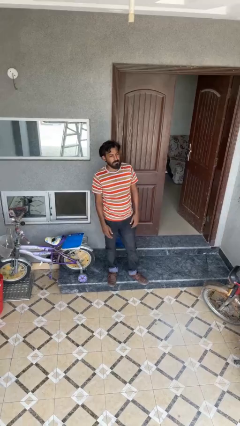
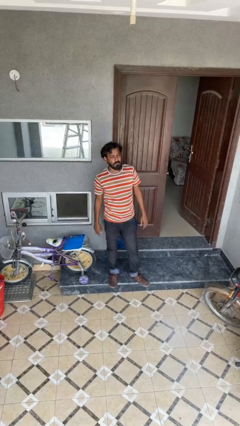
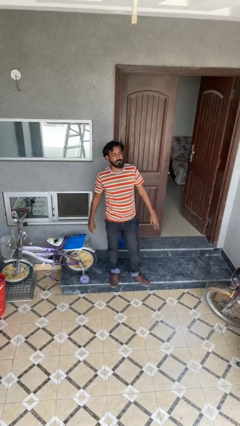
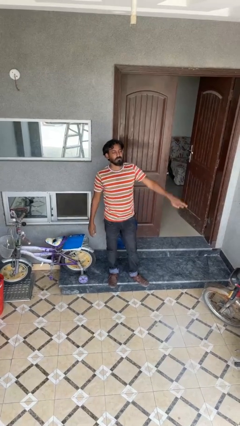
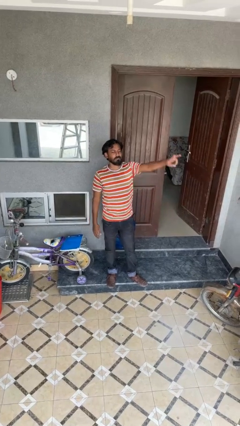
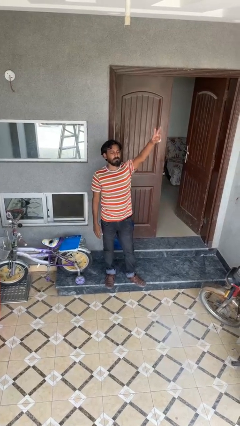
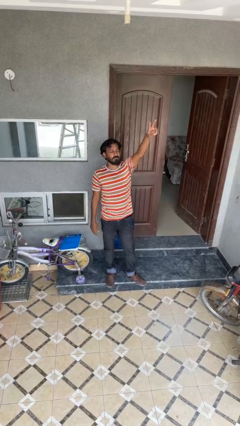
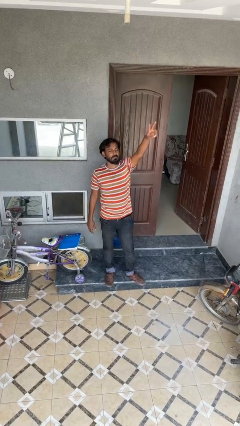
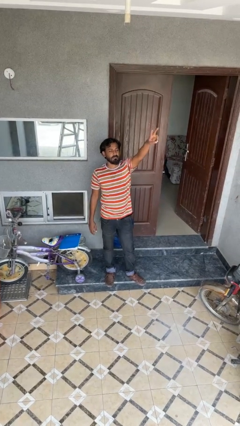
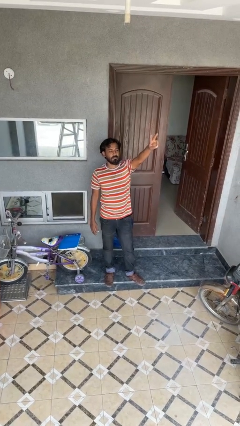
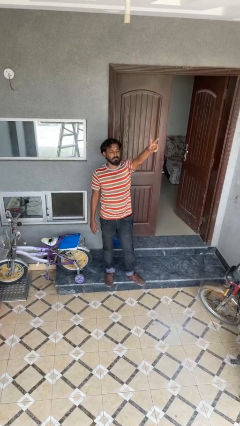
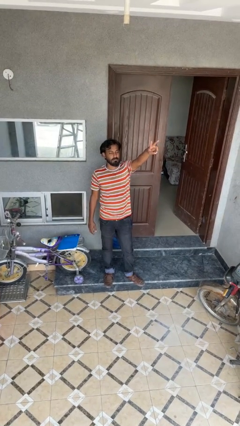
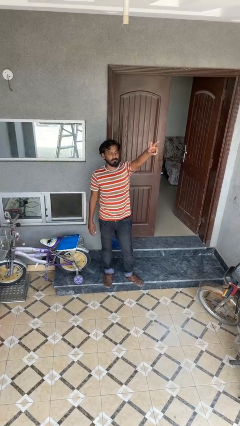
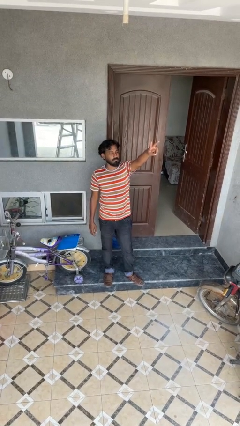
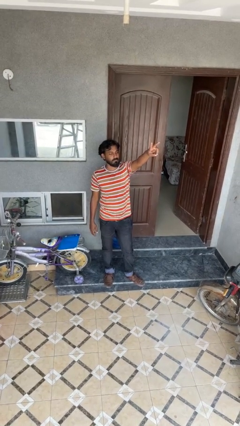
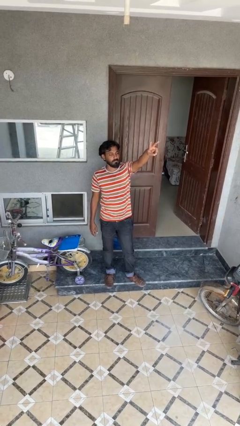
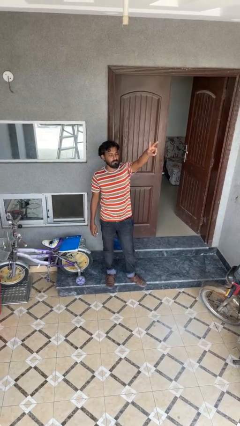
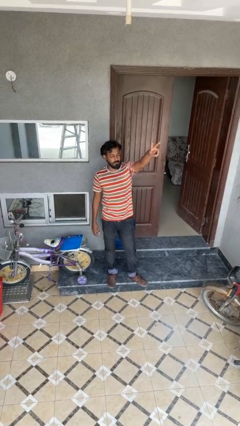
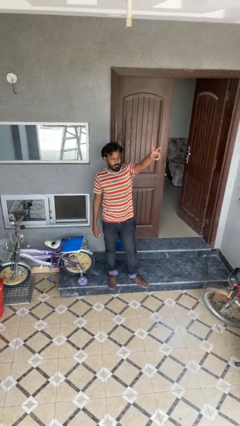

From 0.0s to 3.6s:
person gestures peace

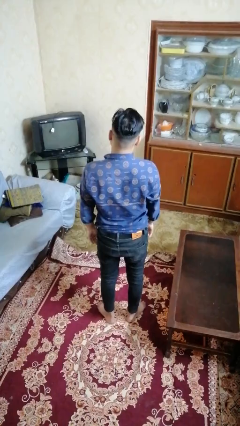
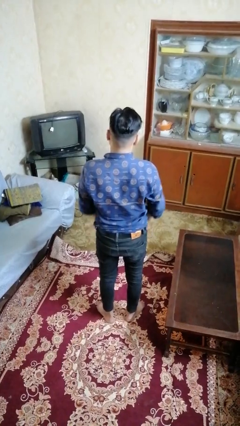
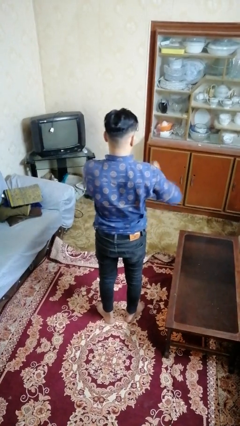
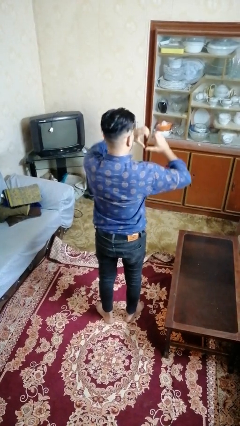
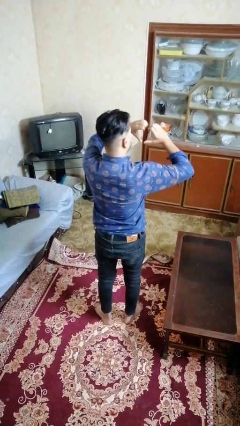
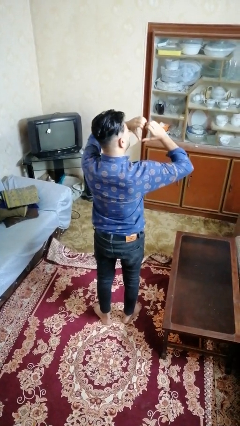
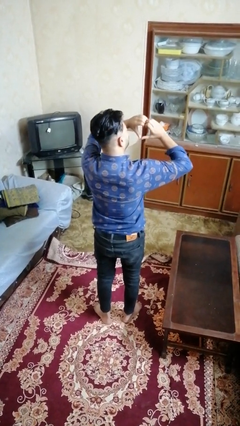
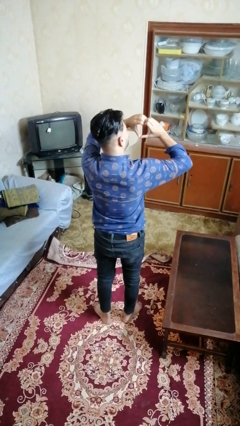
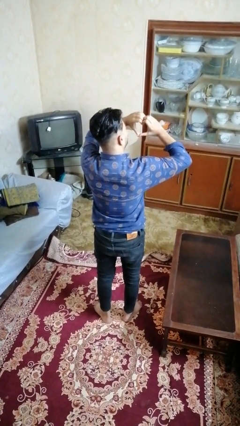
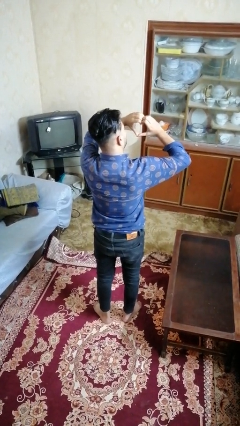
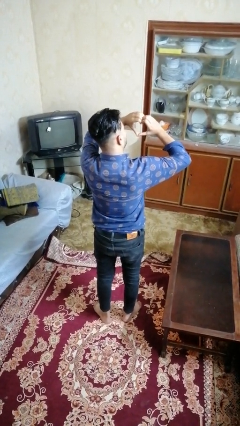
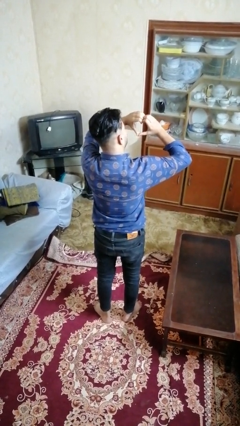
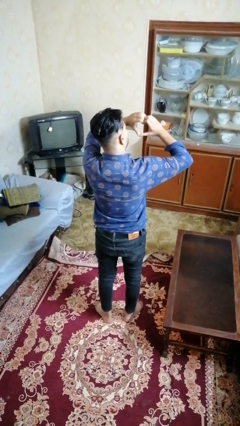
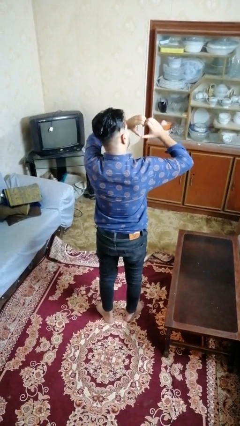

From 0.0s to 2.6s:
person gestures heart

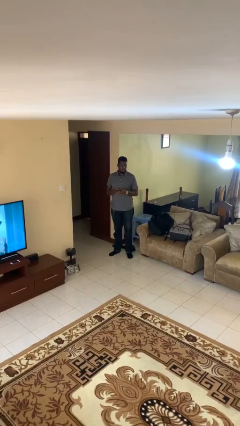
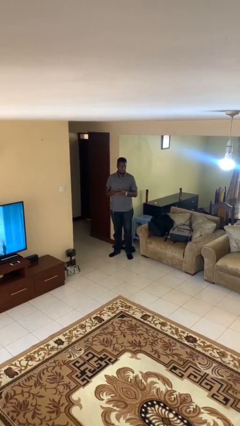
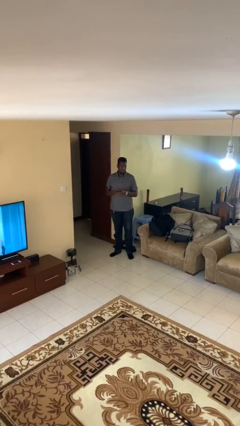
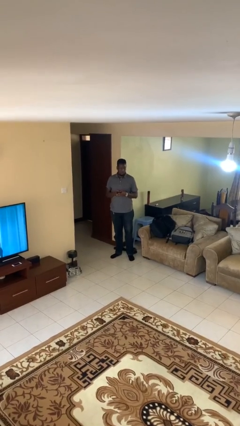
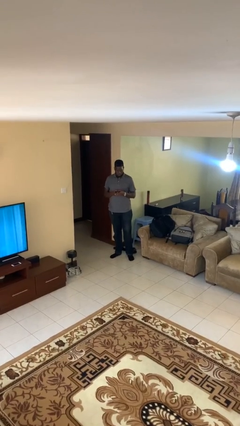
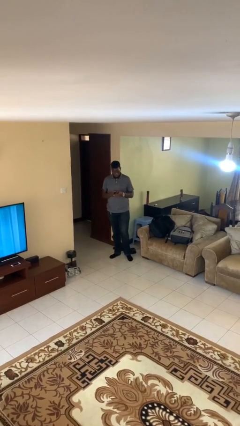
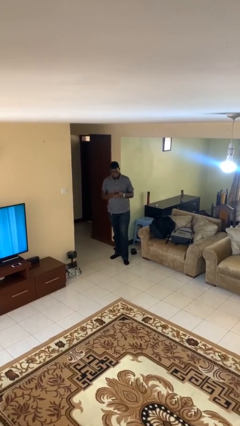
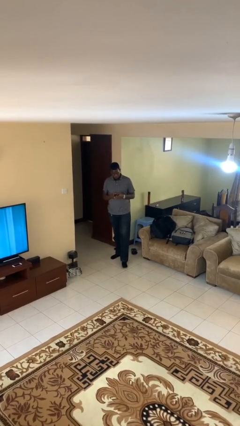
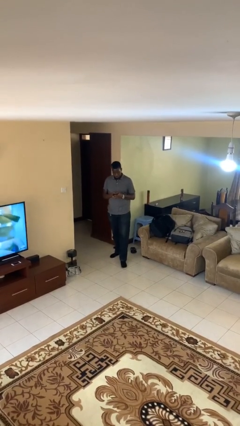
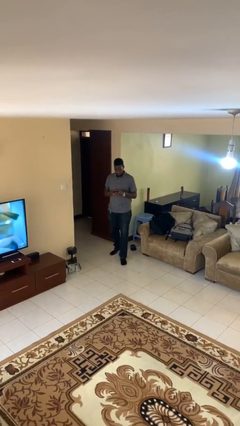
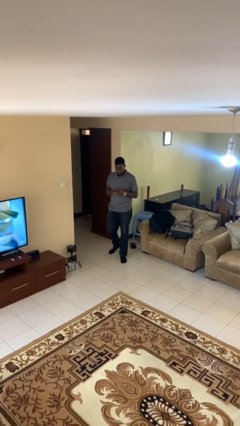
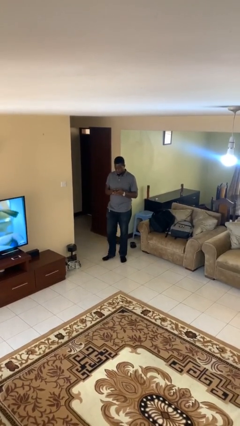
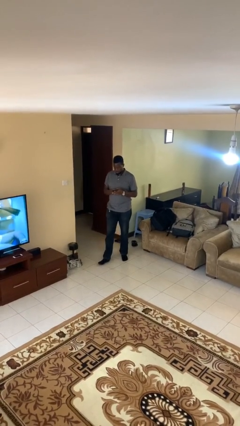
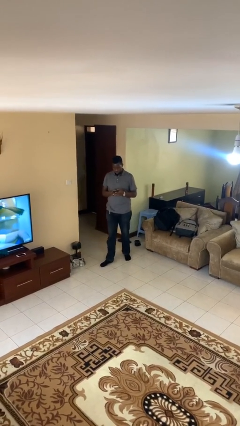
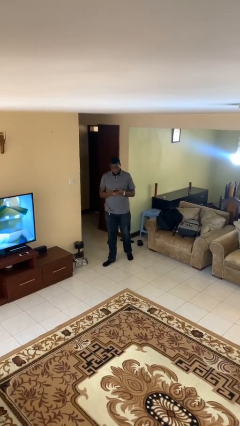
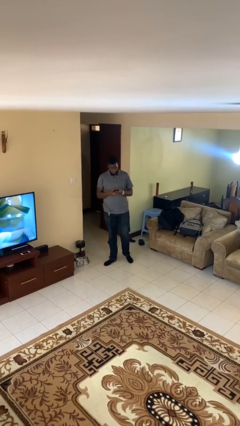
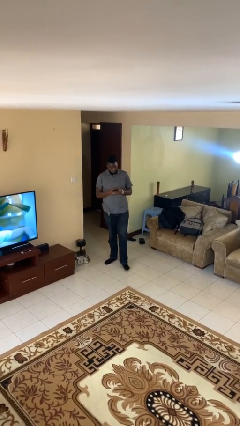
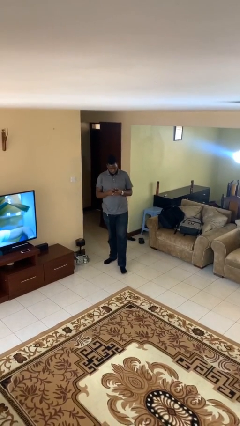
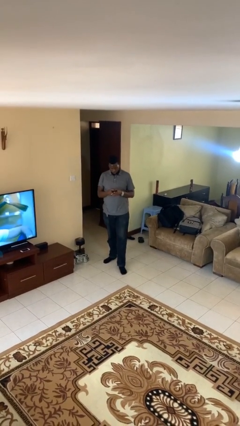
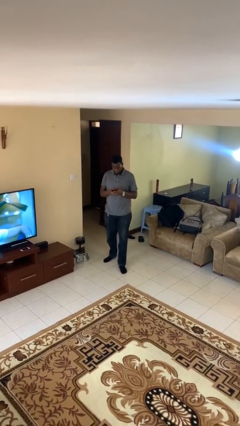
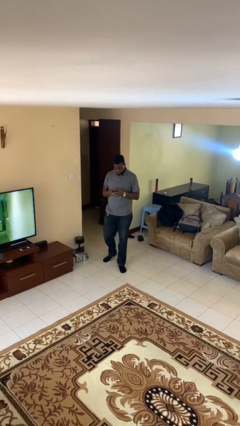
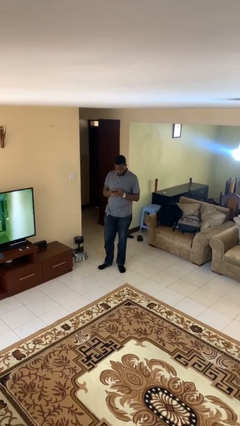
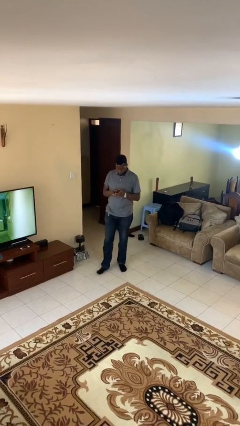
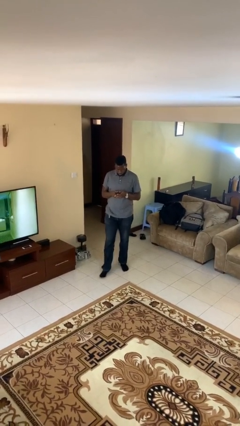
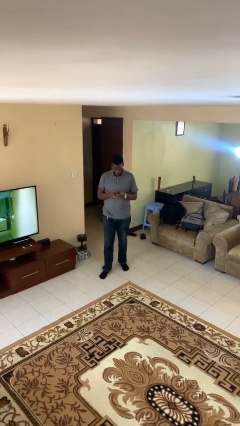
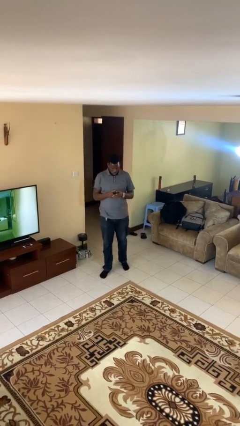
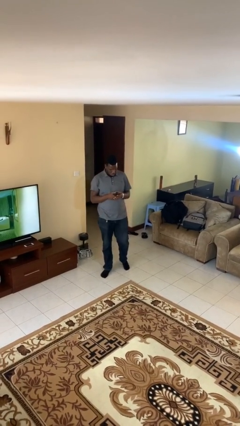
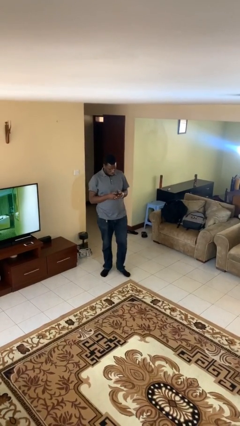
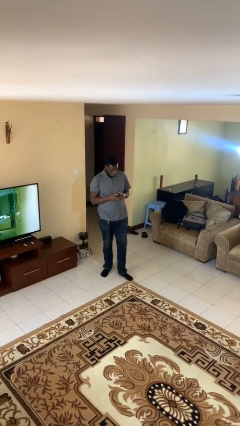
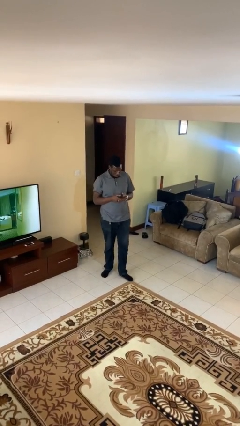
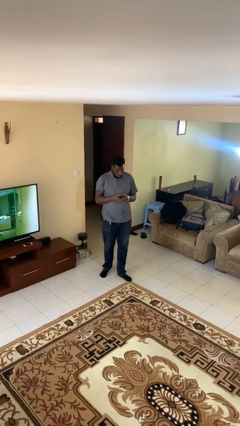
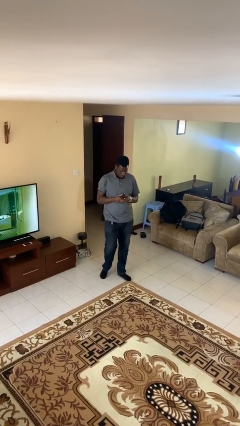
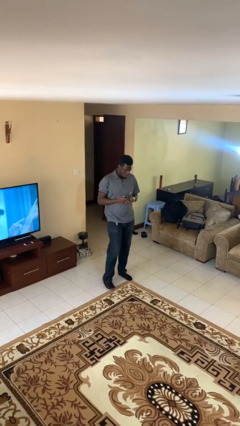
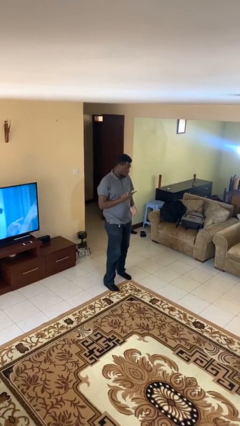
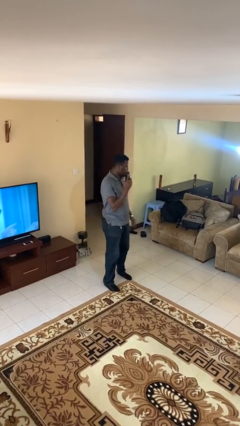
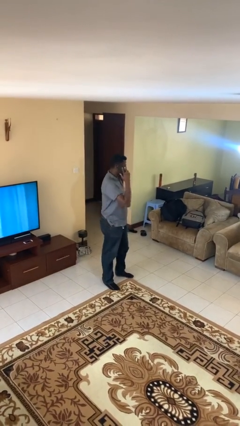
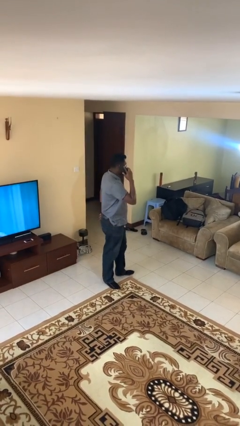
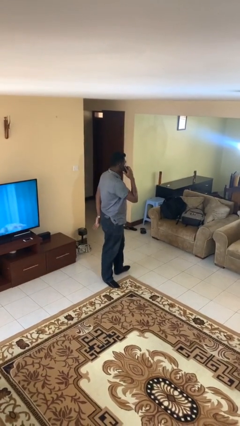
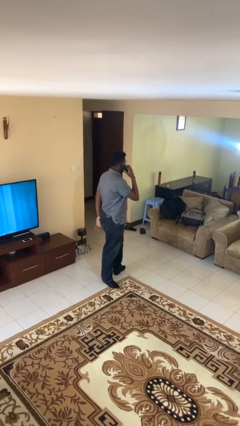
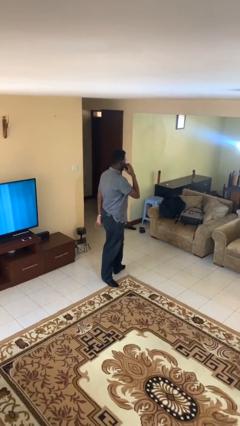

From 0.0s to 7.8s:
person texts on phone

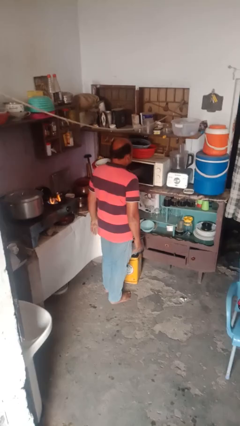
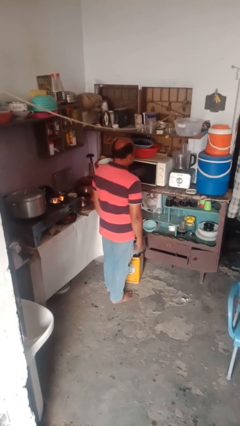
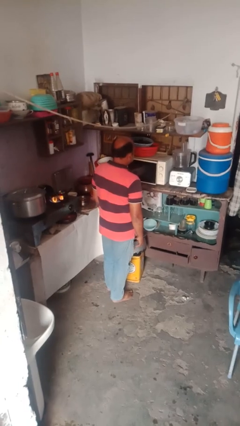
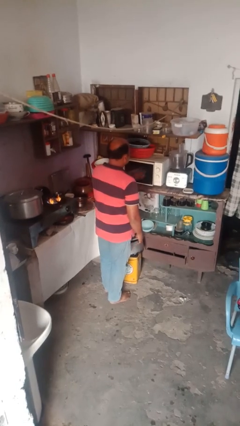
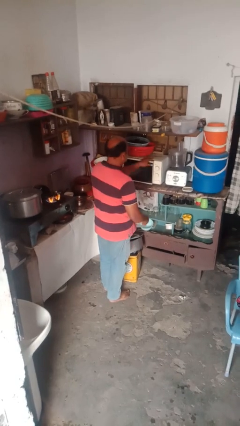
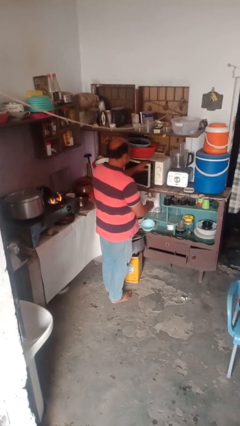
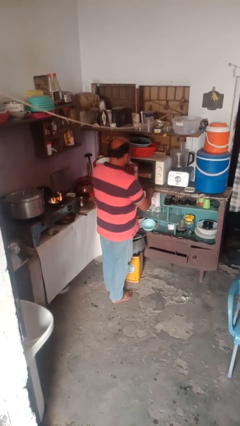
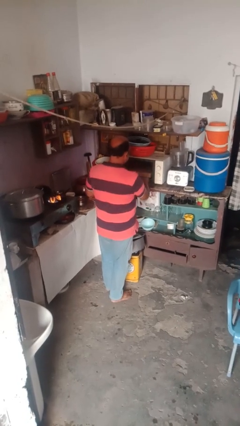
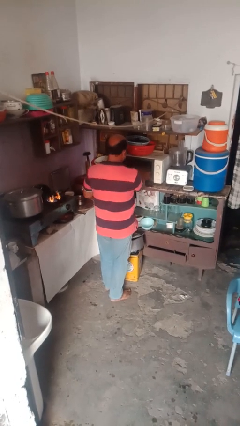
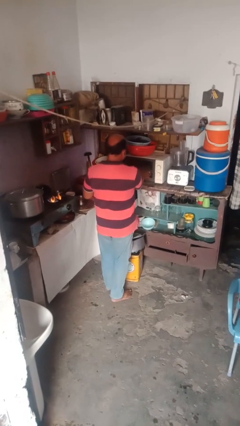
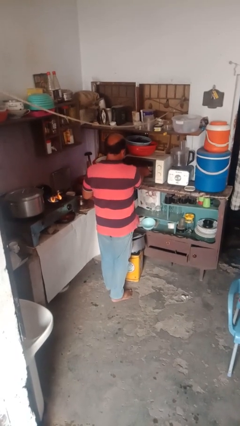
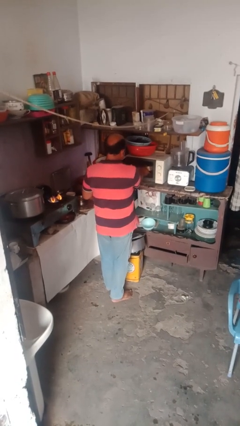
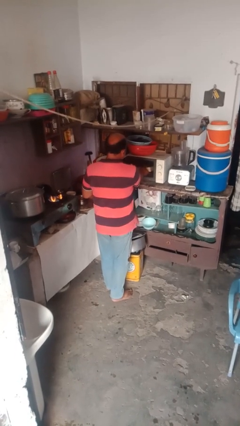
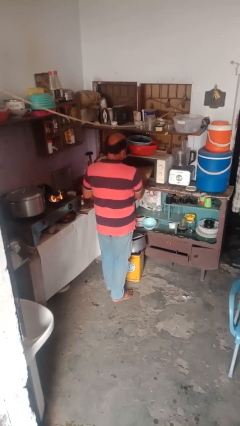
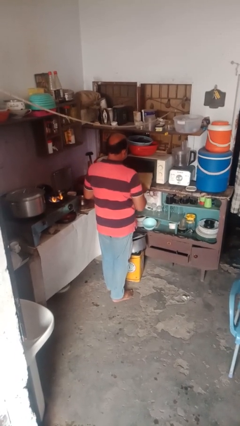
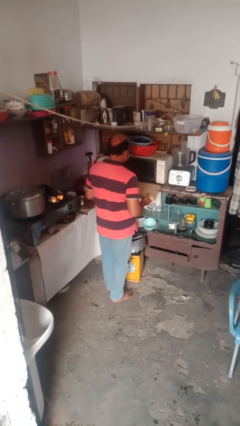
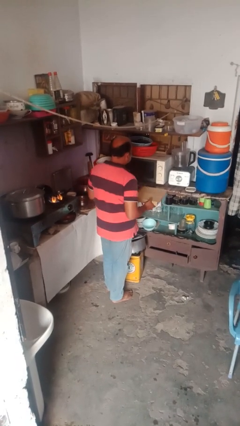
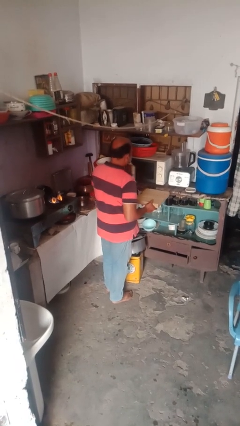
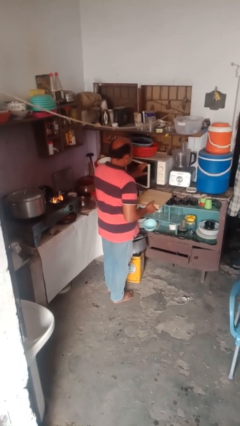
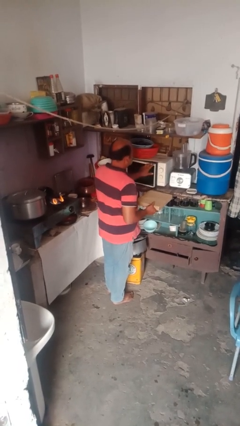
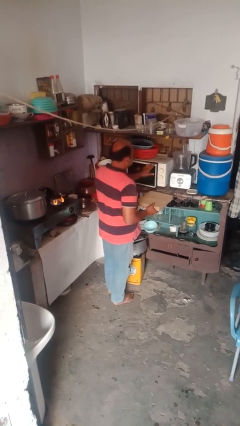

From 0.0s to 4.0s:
person takes object from microwave
